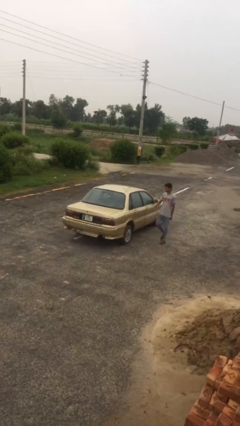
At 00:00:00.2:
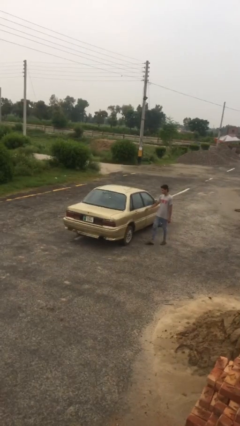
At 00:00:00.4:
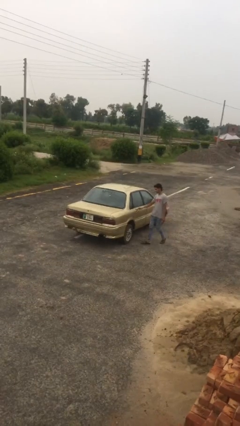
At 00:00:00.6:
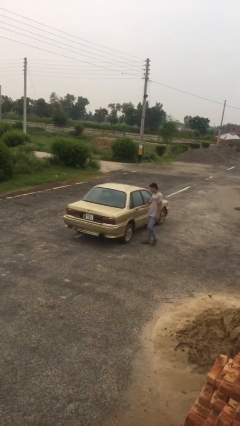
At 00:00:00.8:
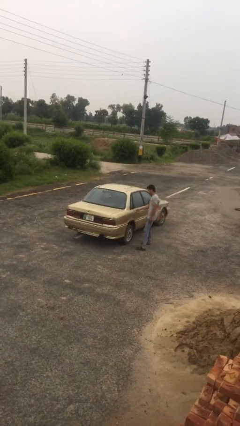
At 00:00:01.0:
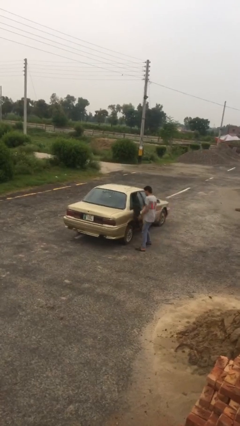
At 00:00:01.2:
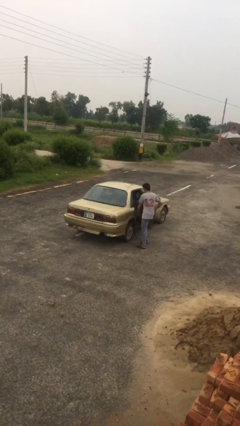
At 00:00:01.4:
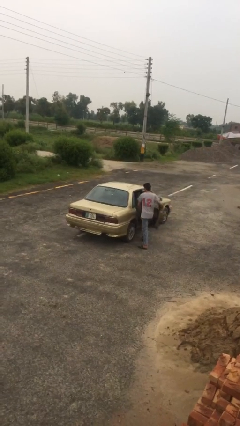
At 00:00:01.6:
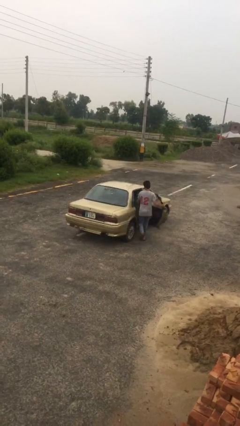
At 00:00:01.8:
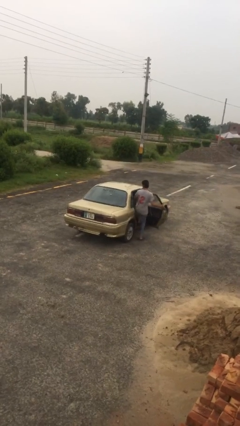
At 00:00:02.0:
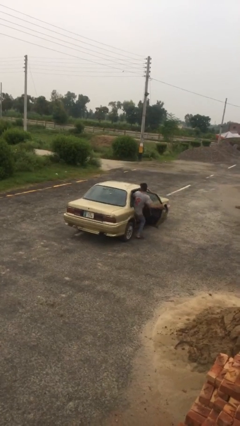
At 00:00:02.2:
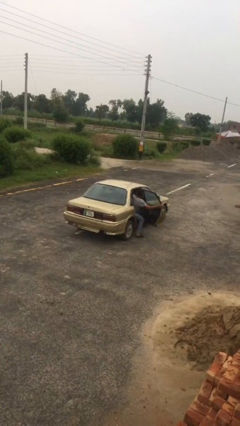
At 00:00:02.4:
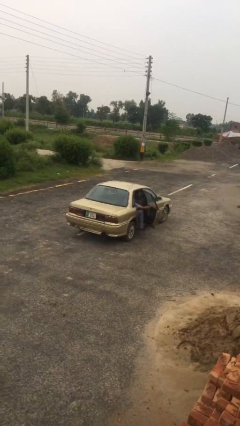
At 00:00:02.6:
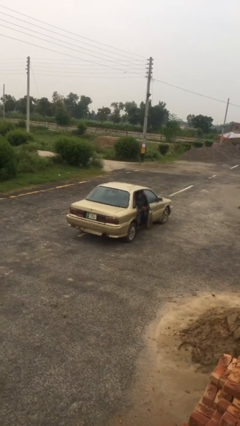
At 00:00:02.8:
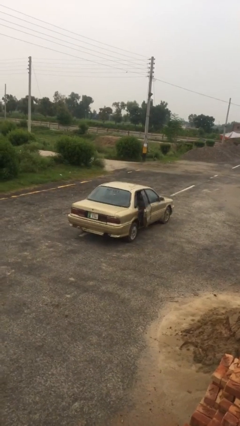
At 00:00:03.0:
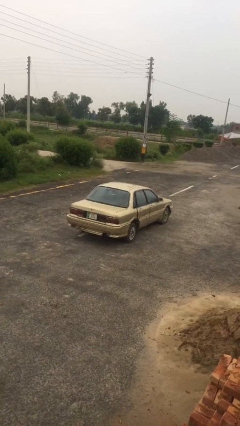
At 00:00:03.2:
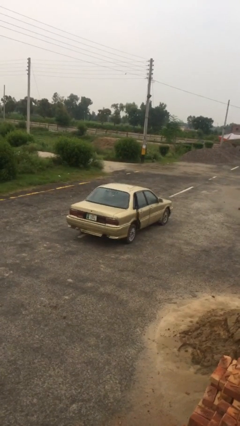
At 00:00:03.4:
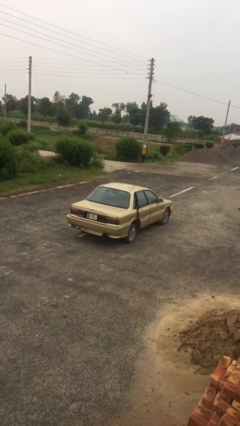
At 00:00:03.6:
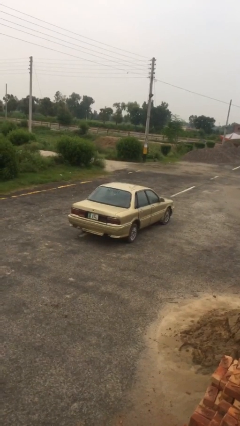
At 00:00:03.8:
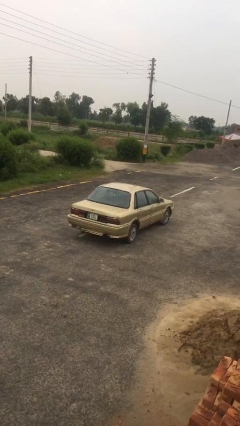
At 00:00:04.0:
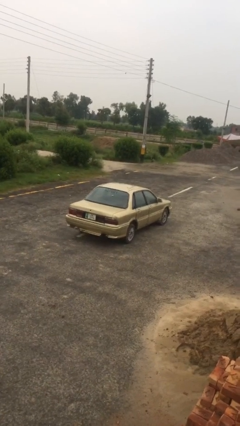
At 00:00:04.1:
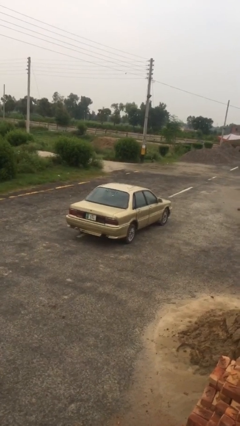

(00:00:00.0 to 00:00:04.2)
car picks up person

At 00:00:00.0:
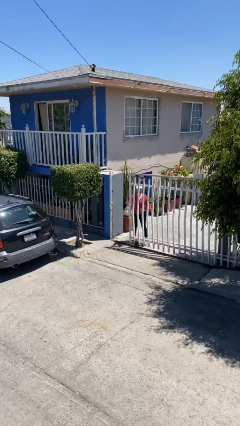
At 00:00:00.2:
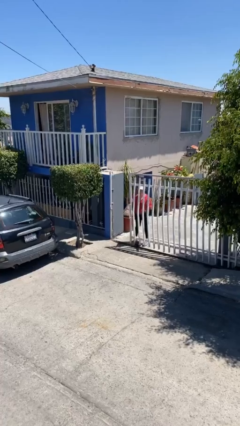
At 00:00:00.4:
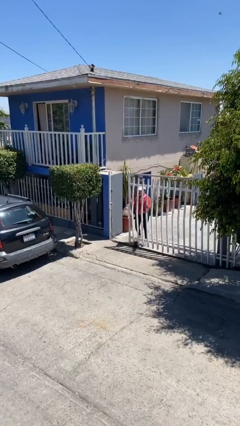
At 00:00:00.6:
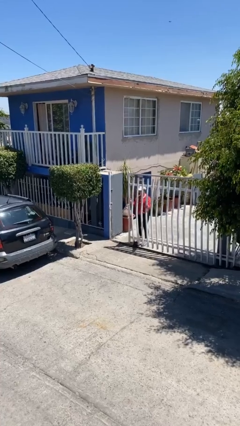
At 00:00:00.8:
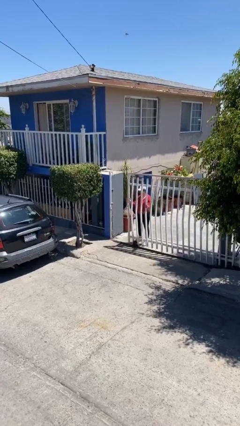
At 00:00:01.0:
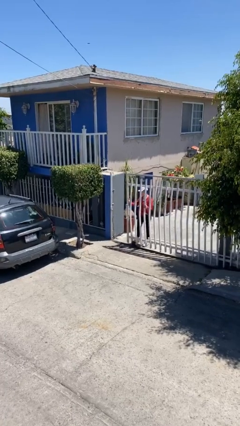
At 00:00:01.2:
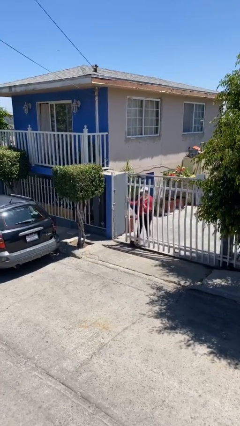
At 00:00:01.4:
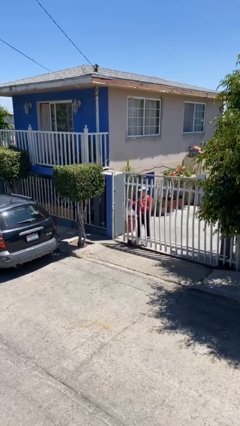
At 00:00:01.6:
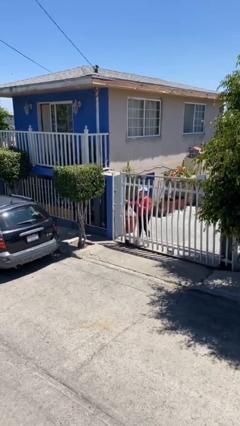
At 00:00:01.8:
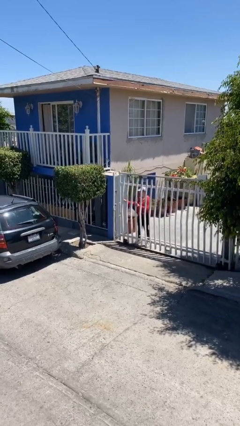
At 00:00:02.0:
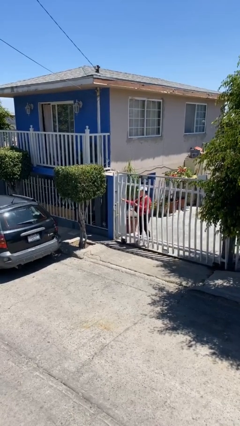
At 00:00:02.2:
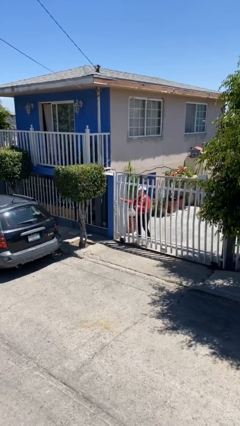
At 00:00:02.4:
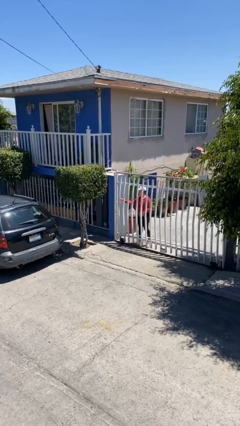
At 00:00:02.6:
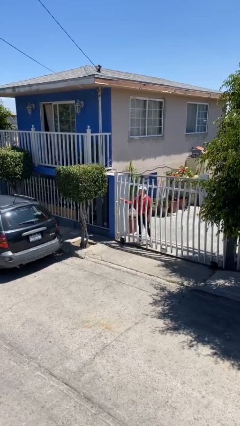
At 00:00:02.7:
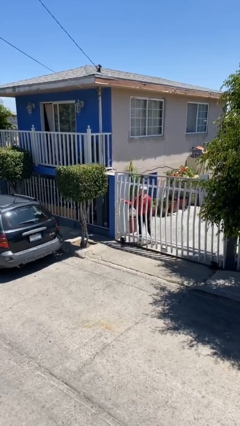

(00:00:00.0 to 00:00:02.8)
person closes facility door

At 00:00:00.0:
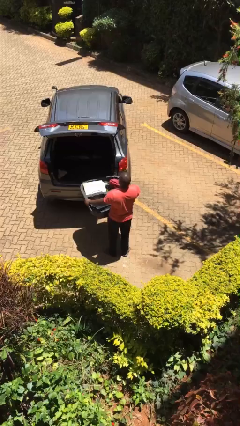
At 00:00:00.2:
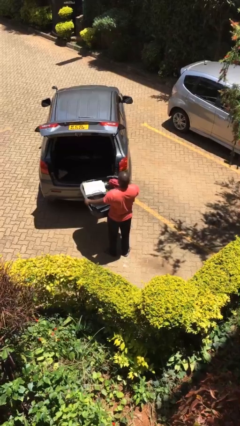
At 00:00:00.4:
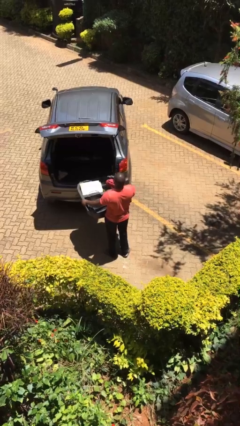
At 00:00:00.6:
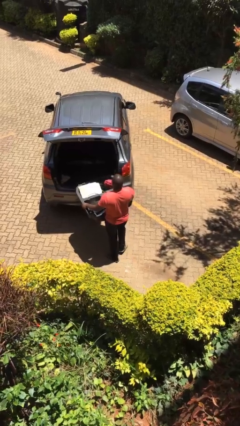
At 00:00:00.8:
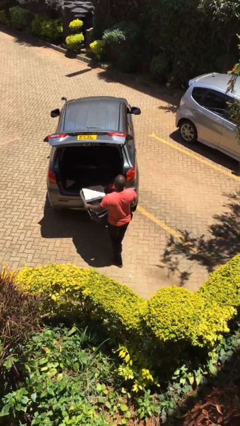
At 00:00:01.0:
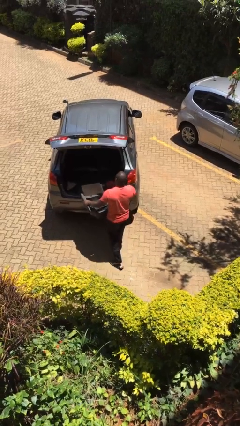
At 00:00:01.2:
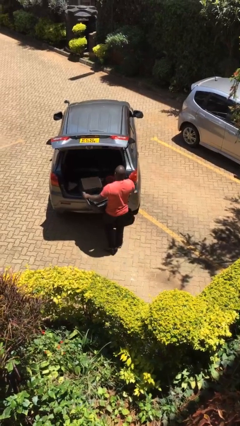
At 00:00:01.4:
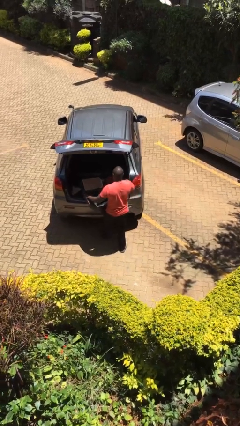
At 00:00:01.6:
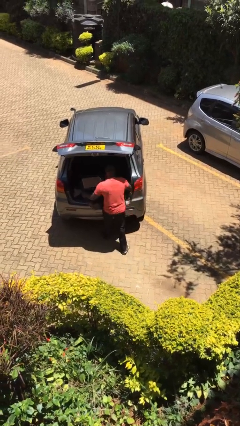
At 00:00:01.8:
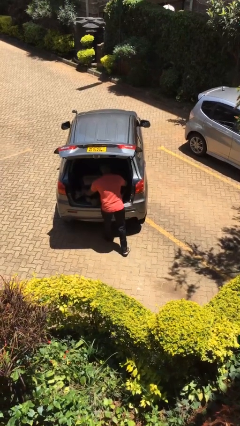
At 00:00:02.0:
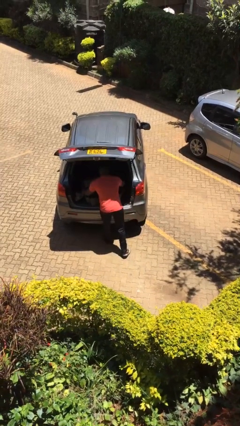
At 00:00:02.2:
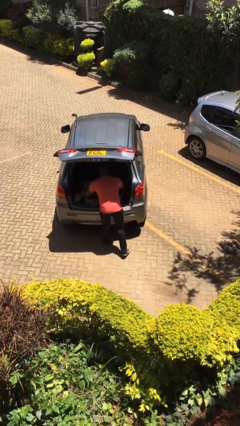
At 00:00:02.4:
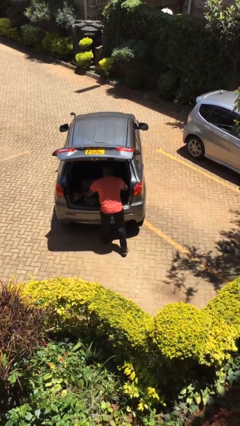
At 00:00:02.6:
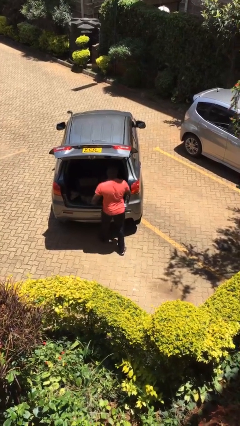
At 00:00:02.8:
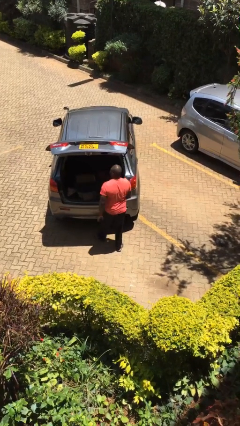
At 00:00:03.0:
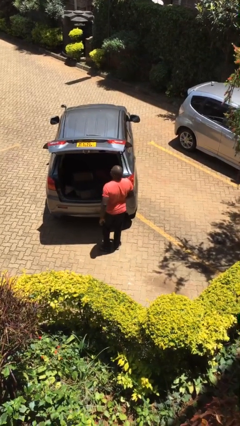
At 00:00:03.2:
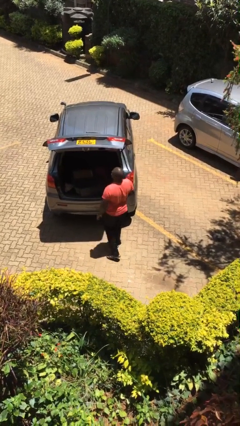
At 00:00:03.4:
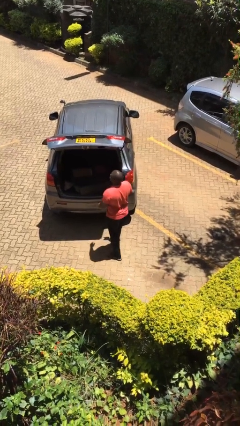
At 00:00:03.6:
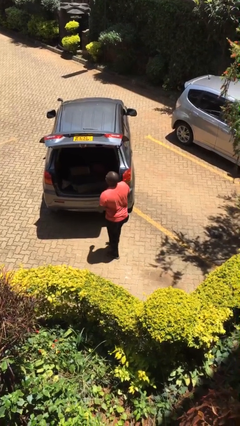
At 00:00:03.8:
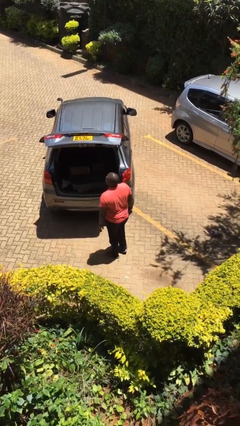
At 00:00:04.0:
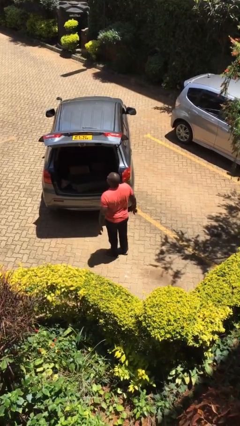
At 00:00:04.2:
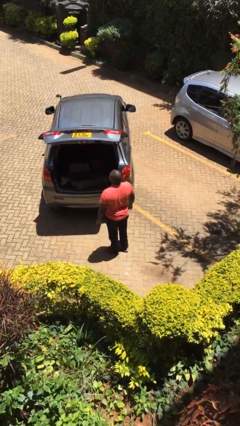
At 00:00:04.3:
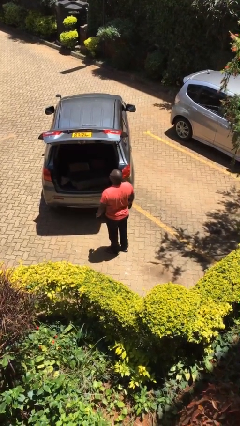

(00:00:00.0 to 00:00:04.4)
person loads car

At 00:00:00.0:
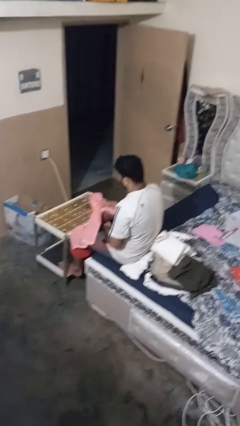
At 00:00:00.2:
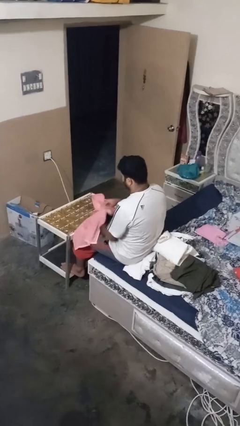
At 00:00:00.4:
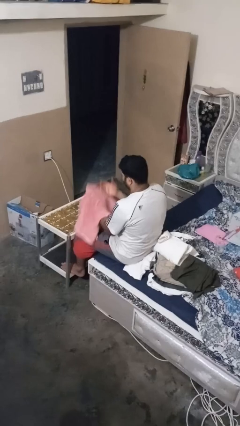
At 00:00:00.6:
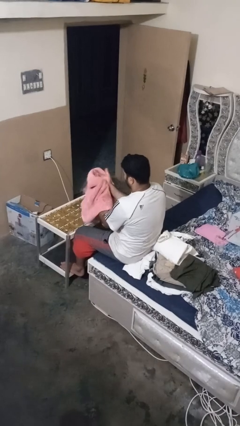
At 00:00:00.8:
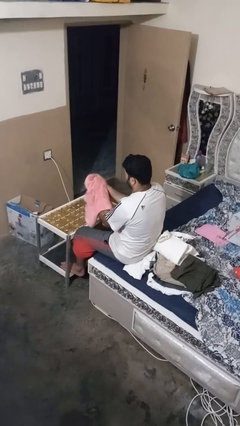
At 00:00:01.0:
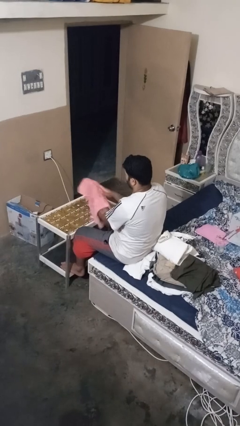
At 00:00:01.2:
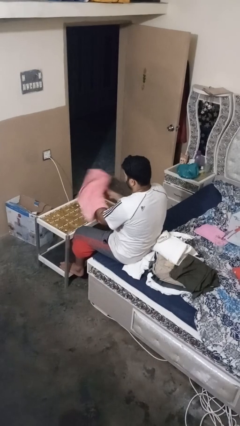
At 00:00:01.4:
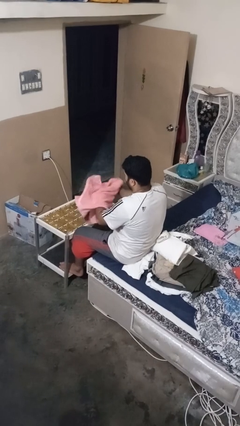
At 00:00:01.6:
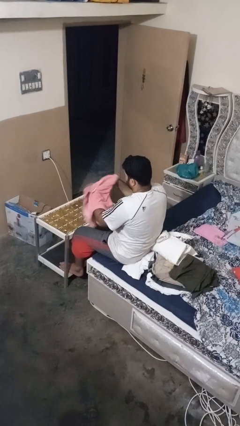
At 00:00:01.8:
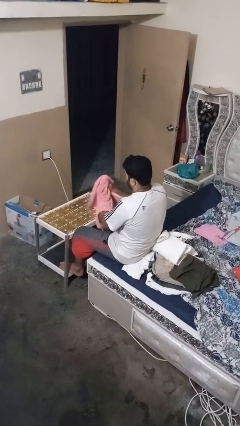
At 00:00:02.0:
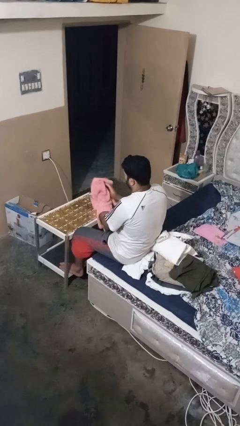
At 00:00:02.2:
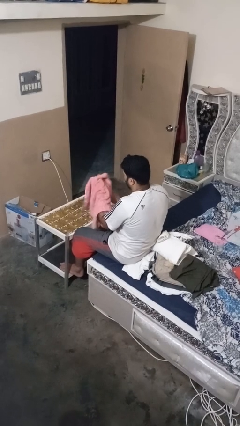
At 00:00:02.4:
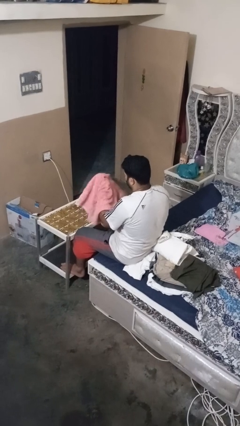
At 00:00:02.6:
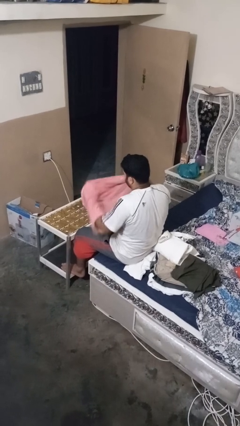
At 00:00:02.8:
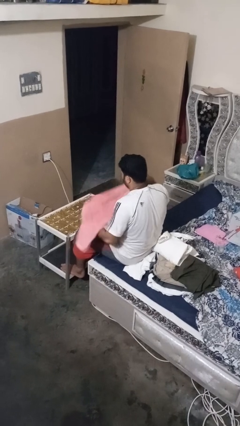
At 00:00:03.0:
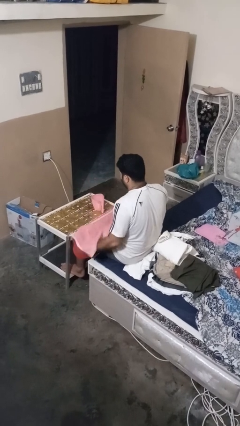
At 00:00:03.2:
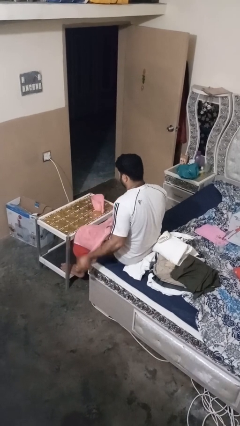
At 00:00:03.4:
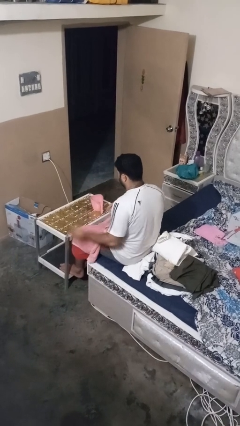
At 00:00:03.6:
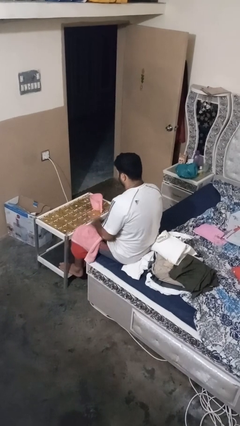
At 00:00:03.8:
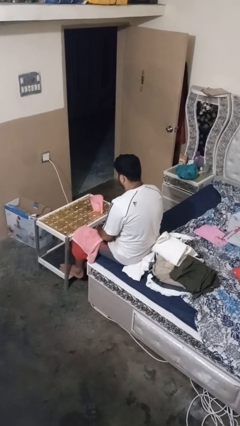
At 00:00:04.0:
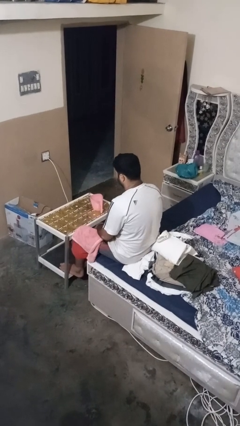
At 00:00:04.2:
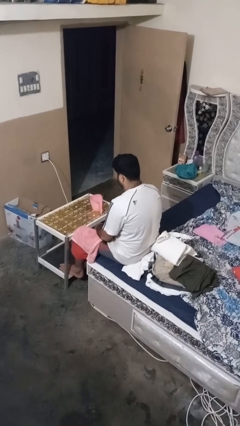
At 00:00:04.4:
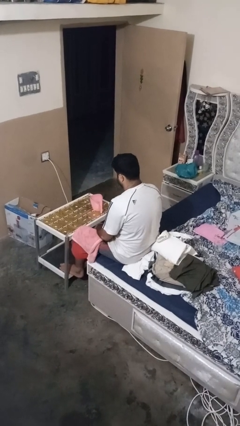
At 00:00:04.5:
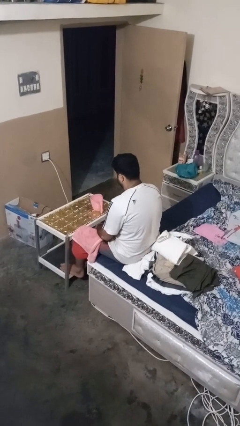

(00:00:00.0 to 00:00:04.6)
person dries hands with towel

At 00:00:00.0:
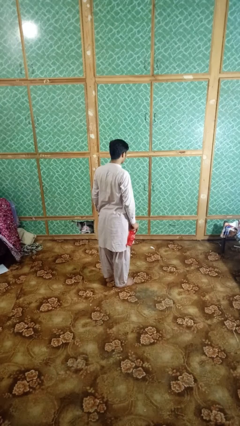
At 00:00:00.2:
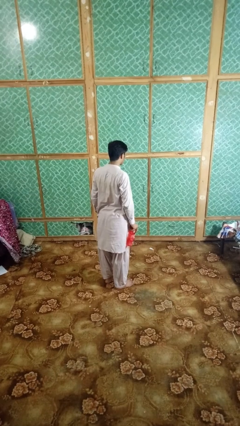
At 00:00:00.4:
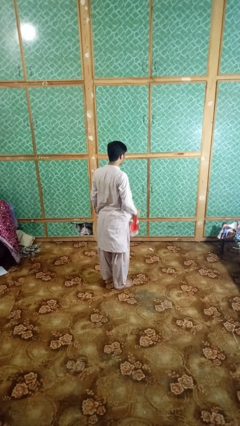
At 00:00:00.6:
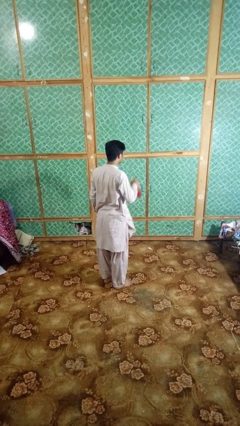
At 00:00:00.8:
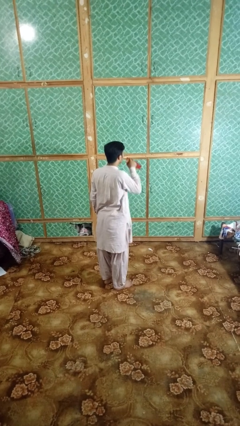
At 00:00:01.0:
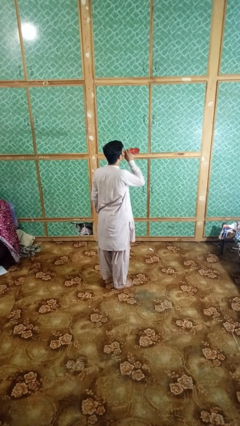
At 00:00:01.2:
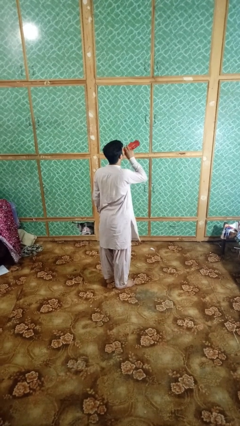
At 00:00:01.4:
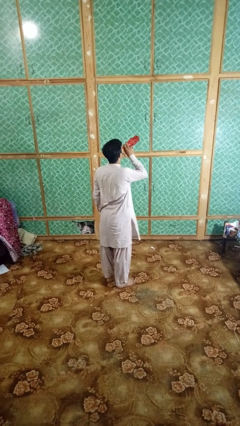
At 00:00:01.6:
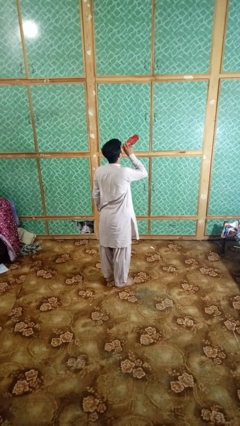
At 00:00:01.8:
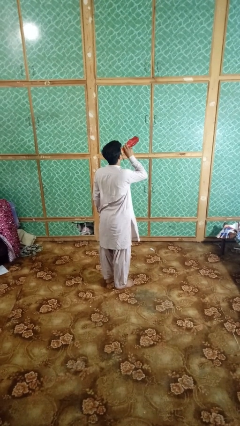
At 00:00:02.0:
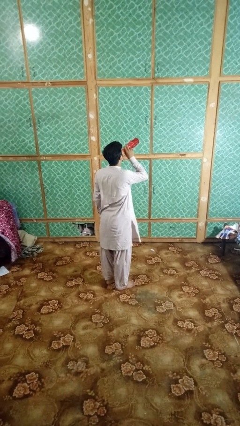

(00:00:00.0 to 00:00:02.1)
person drinks from bottle
